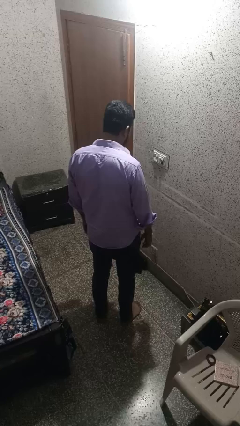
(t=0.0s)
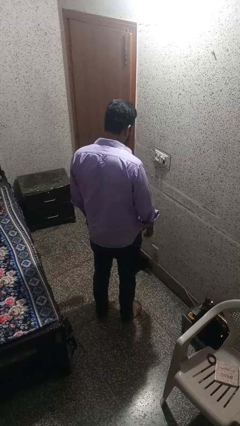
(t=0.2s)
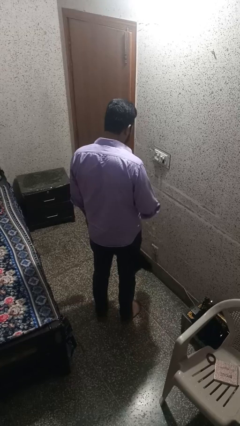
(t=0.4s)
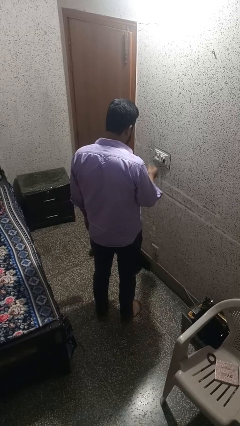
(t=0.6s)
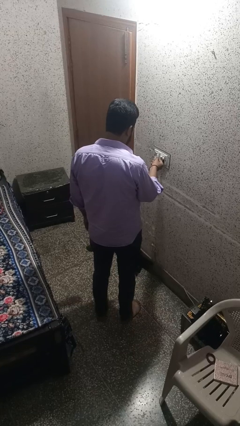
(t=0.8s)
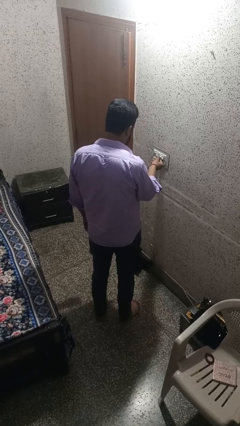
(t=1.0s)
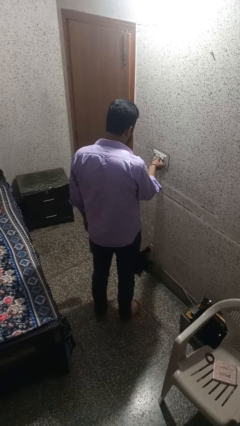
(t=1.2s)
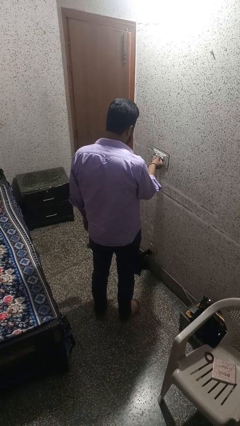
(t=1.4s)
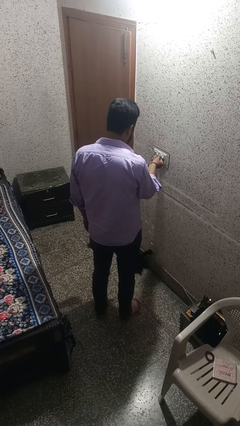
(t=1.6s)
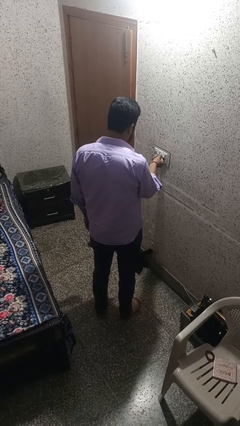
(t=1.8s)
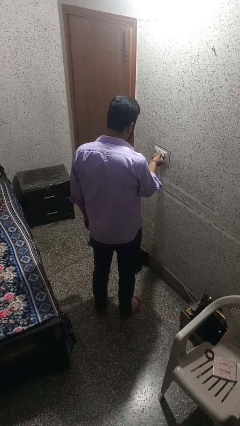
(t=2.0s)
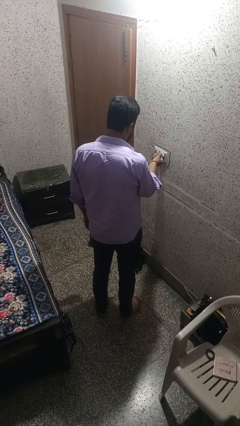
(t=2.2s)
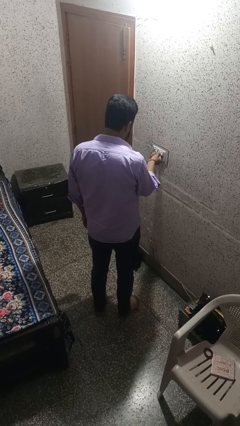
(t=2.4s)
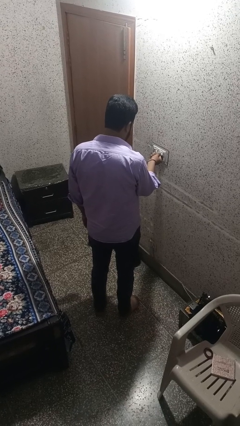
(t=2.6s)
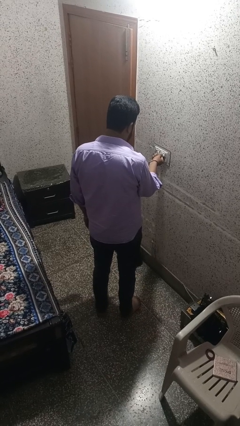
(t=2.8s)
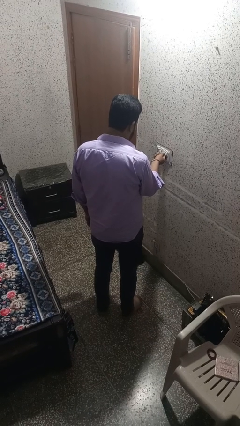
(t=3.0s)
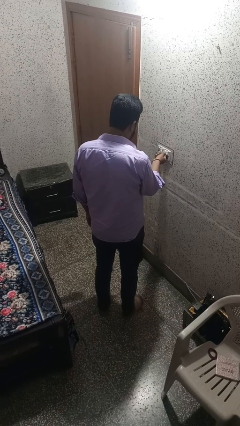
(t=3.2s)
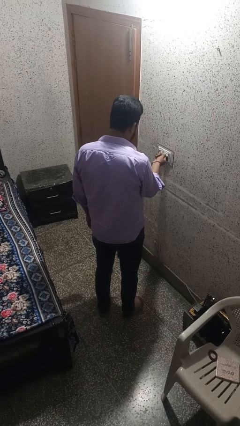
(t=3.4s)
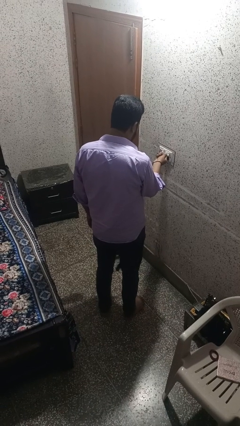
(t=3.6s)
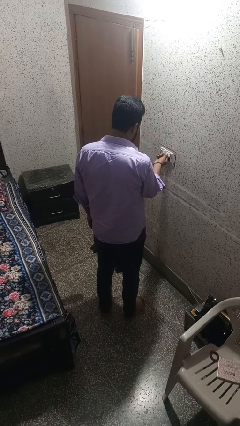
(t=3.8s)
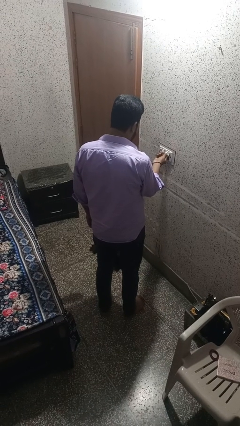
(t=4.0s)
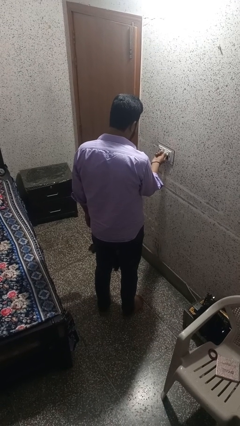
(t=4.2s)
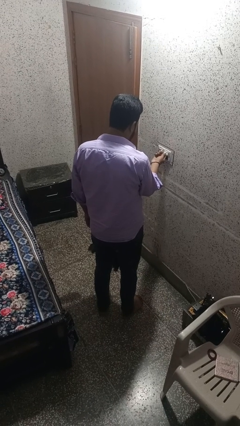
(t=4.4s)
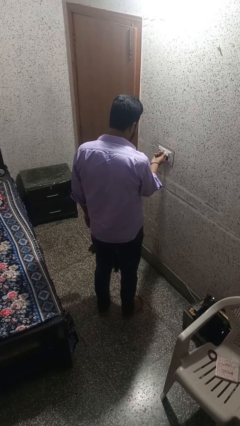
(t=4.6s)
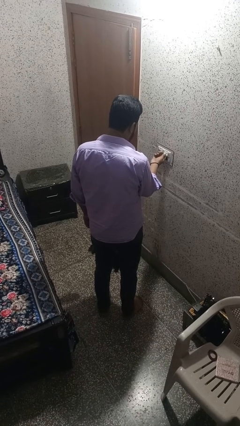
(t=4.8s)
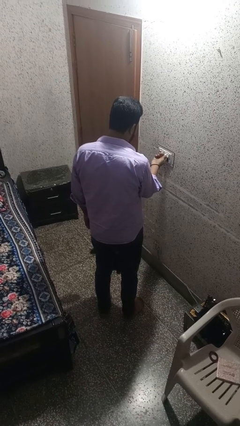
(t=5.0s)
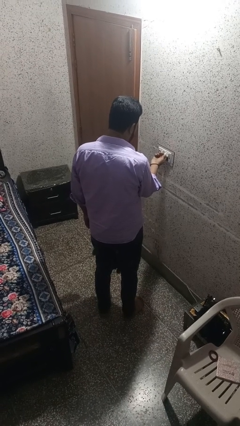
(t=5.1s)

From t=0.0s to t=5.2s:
person turns on fan

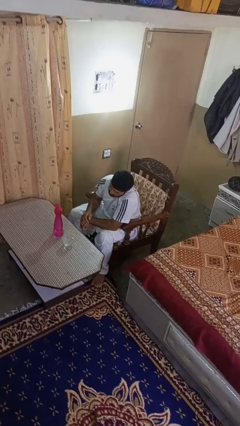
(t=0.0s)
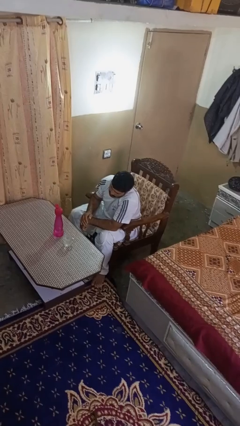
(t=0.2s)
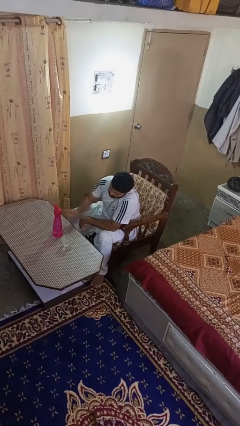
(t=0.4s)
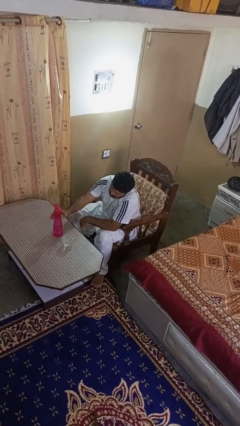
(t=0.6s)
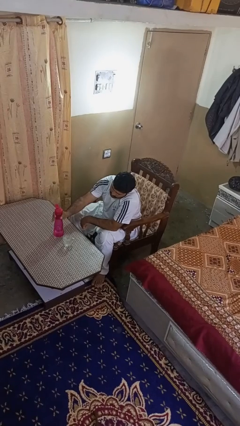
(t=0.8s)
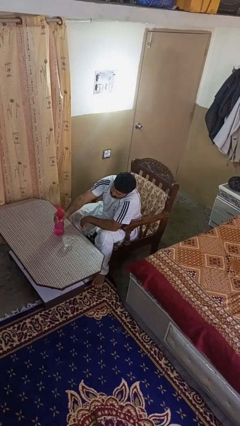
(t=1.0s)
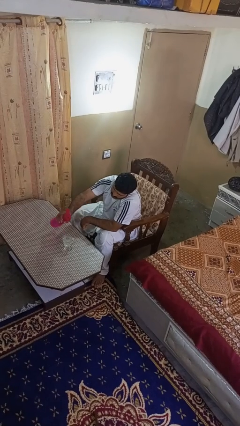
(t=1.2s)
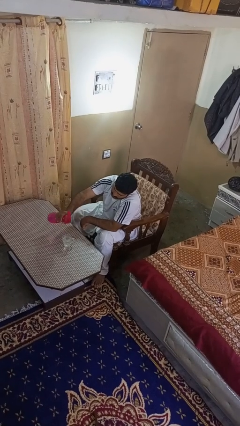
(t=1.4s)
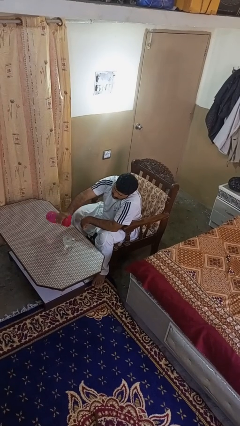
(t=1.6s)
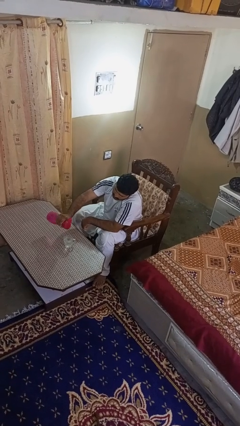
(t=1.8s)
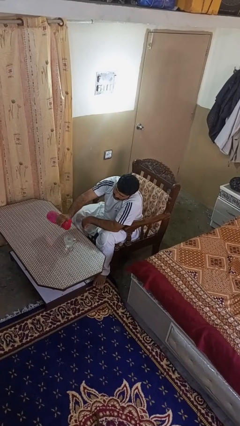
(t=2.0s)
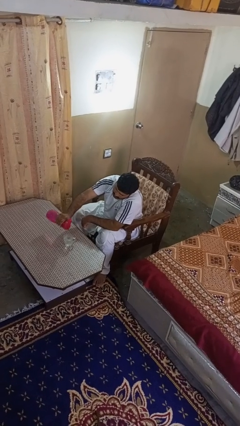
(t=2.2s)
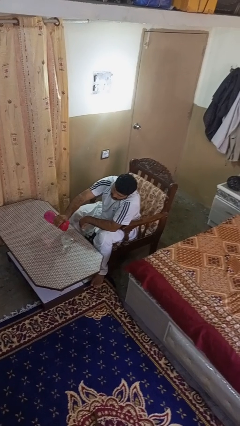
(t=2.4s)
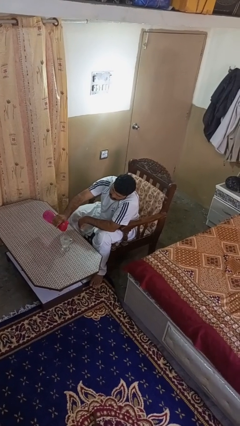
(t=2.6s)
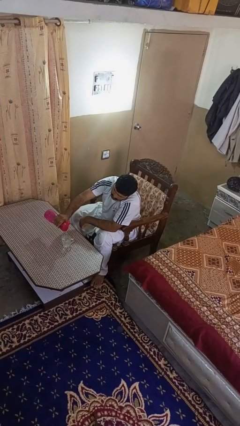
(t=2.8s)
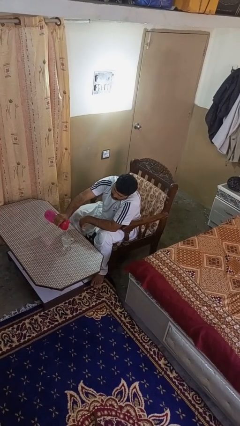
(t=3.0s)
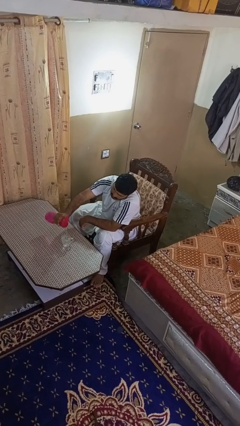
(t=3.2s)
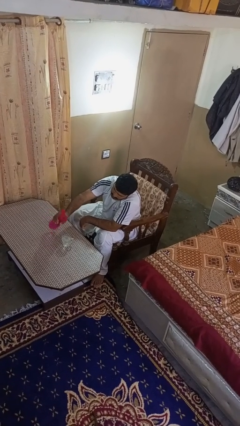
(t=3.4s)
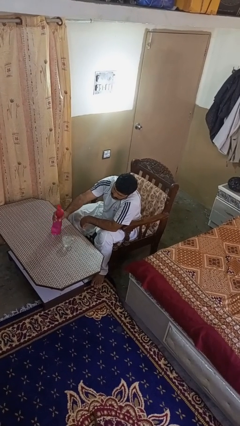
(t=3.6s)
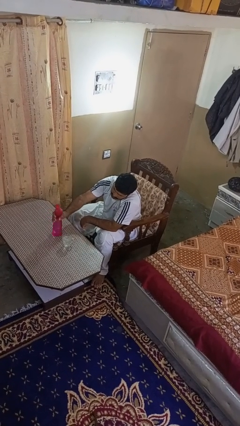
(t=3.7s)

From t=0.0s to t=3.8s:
person pours liquid into cup

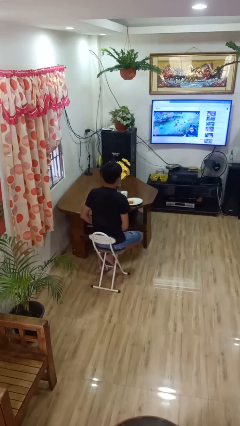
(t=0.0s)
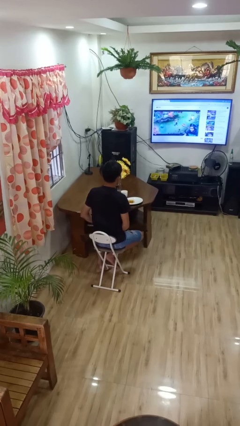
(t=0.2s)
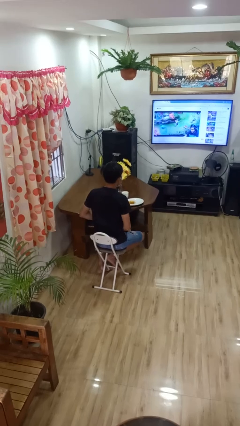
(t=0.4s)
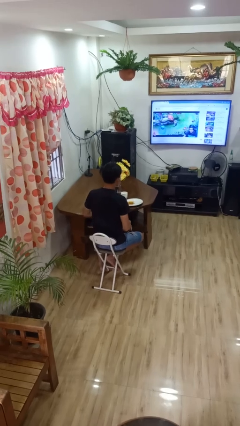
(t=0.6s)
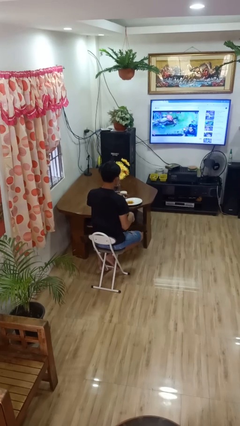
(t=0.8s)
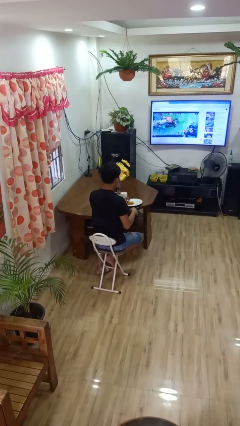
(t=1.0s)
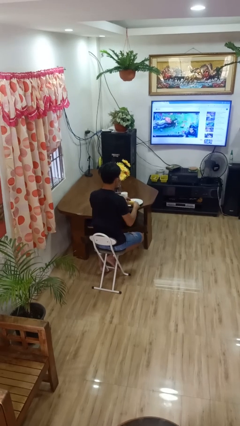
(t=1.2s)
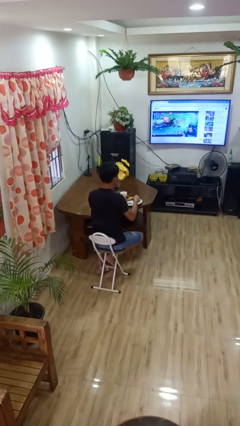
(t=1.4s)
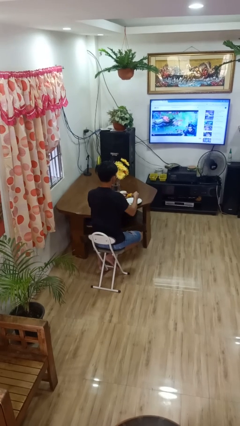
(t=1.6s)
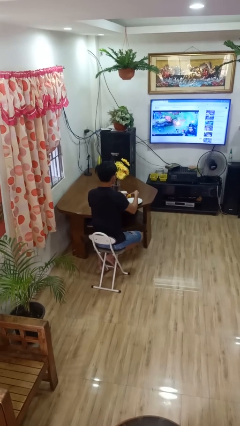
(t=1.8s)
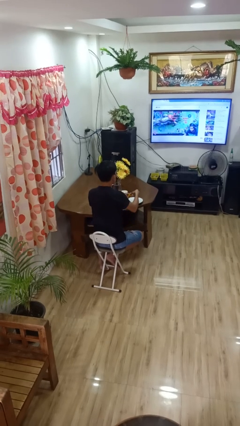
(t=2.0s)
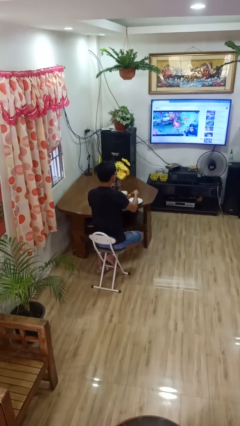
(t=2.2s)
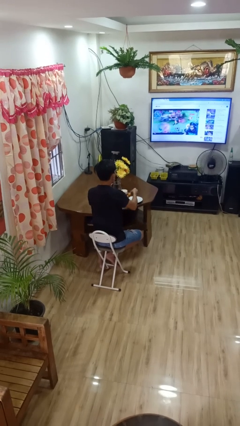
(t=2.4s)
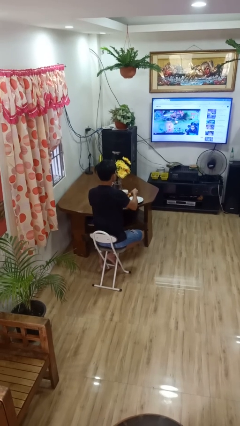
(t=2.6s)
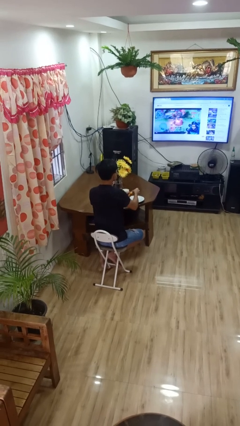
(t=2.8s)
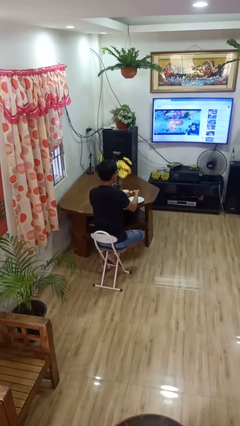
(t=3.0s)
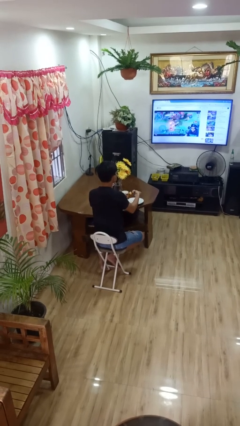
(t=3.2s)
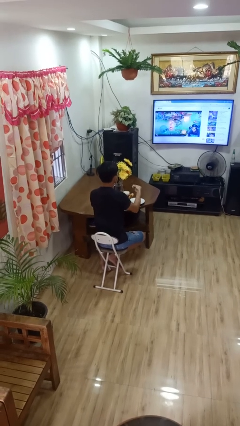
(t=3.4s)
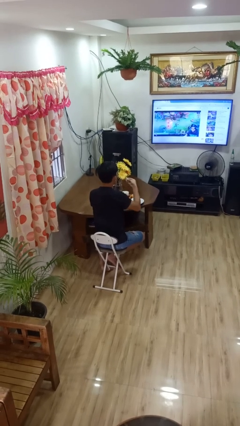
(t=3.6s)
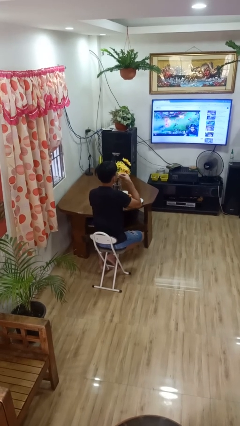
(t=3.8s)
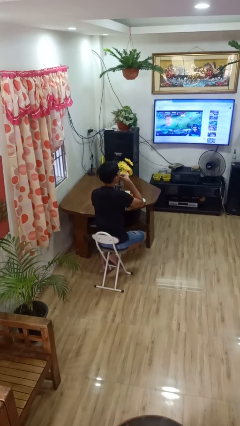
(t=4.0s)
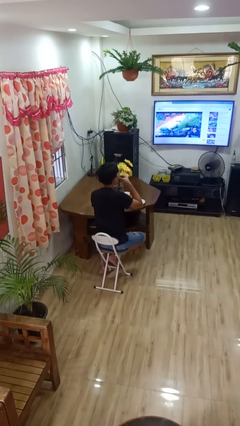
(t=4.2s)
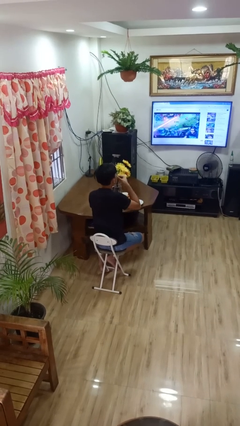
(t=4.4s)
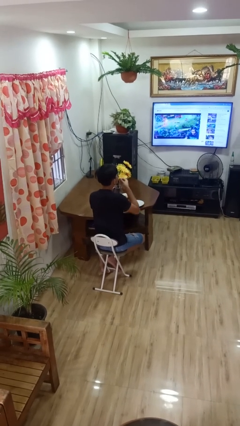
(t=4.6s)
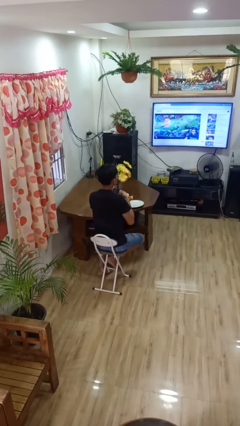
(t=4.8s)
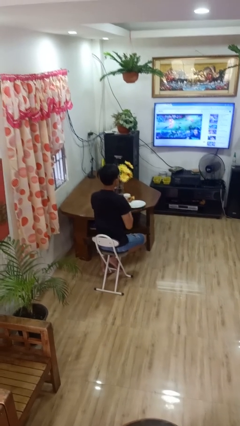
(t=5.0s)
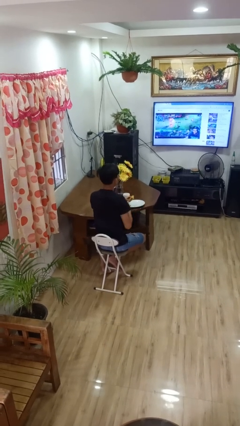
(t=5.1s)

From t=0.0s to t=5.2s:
person eats with hands

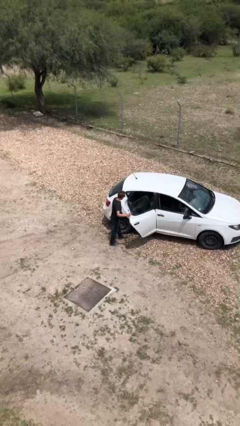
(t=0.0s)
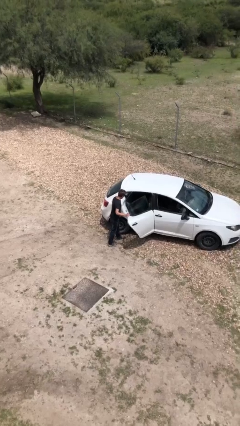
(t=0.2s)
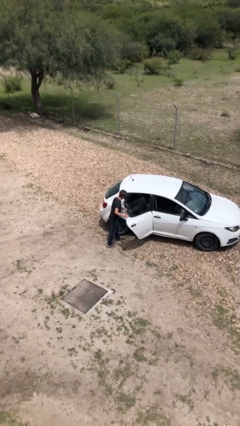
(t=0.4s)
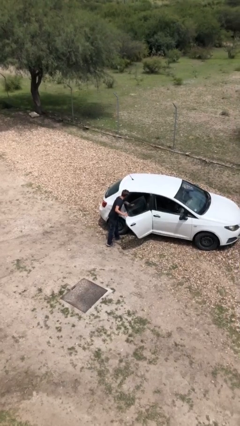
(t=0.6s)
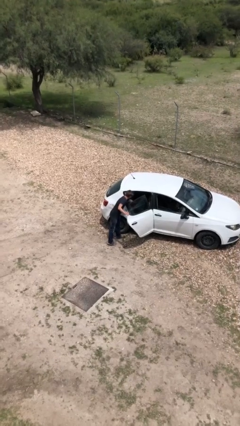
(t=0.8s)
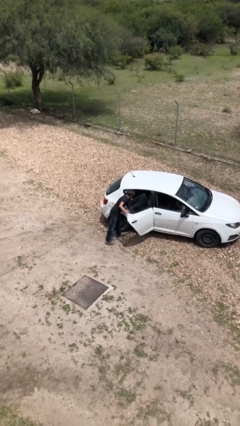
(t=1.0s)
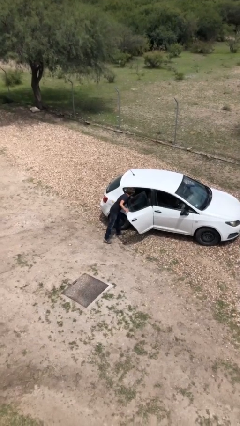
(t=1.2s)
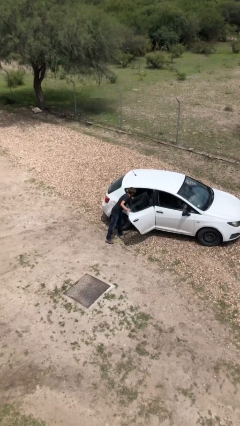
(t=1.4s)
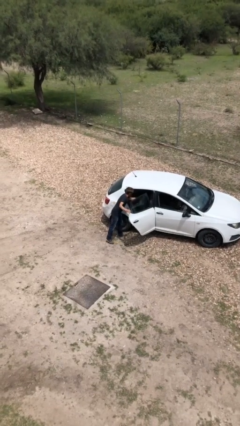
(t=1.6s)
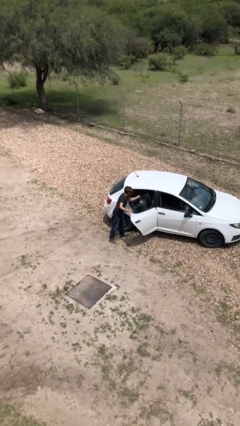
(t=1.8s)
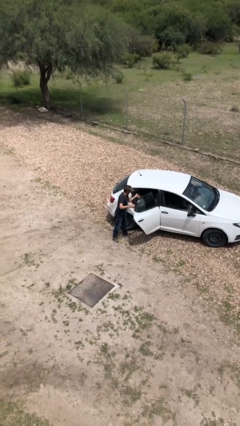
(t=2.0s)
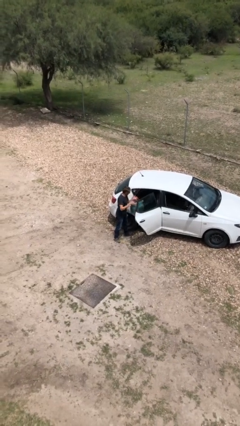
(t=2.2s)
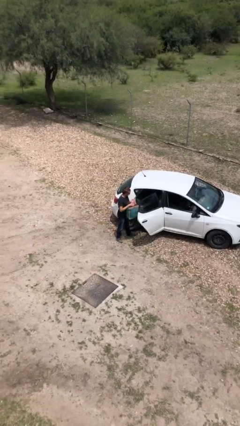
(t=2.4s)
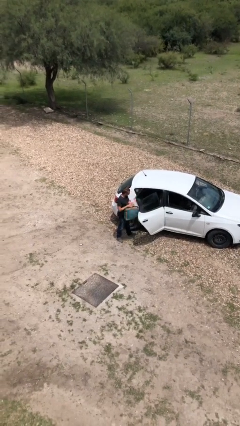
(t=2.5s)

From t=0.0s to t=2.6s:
person unloads car

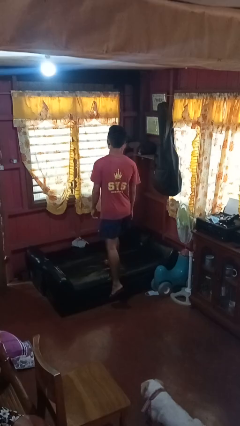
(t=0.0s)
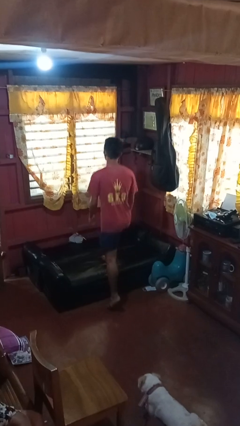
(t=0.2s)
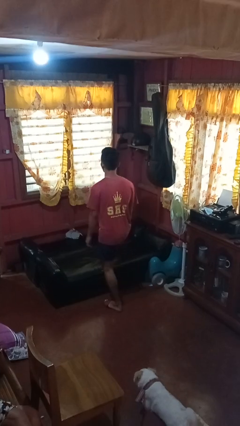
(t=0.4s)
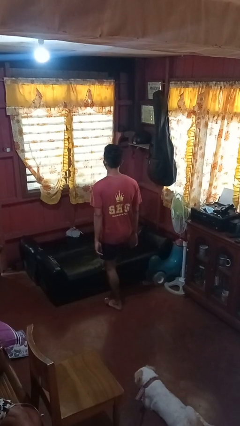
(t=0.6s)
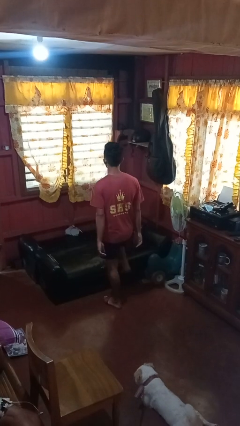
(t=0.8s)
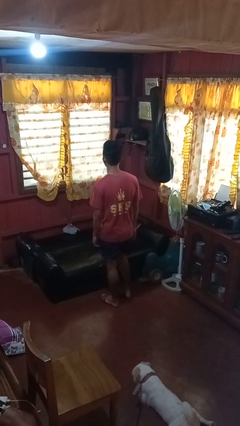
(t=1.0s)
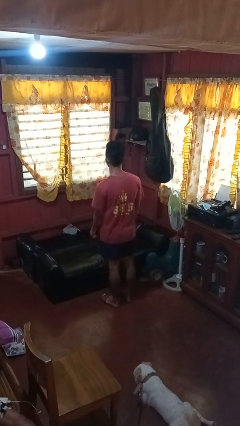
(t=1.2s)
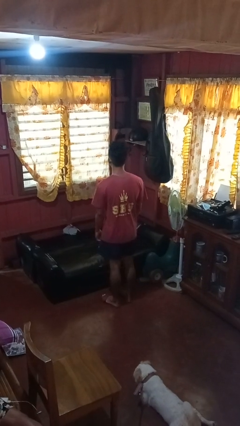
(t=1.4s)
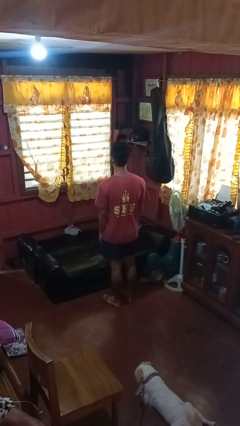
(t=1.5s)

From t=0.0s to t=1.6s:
person climbs off couch
